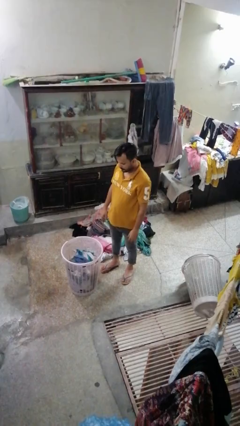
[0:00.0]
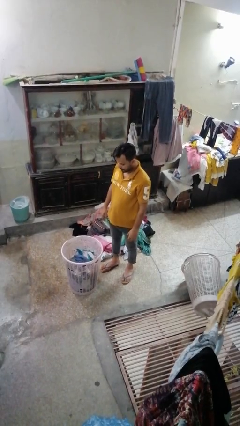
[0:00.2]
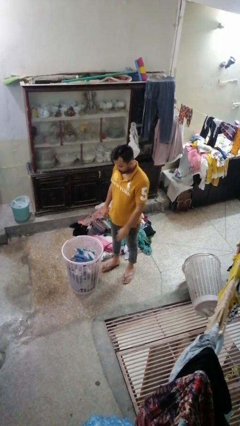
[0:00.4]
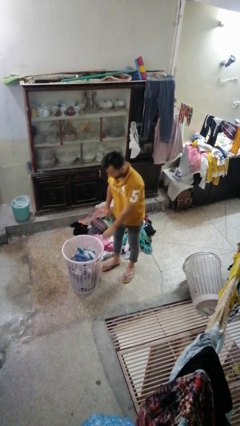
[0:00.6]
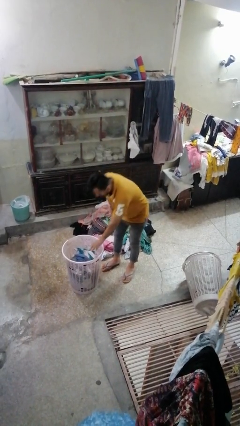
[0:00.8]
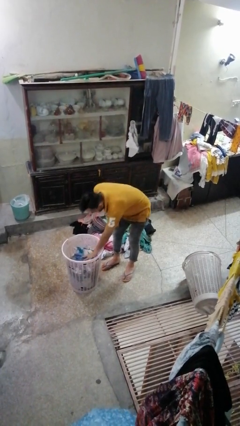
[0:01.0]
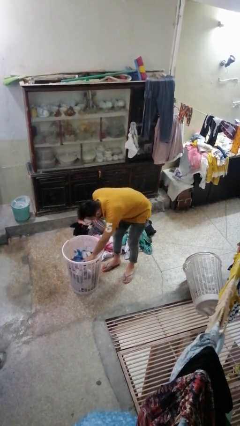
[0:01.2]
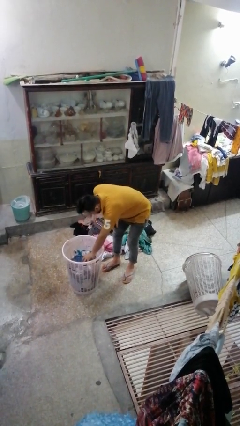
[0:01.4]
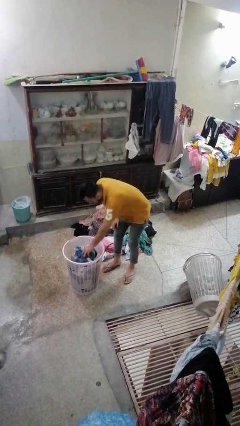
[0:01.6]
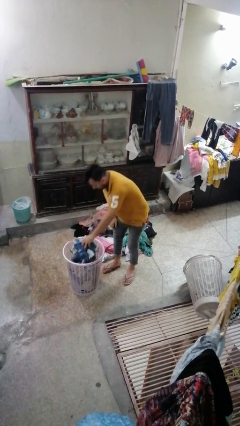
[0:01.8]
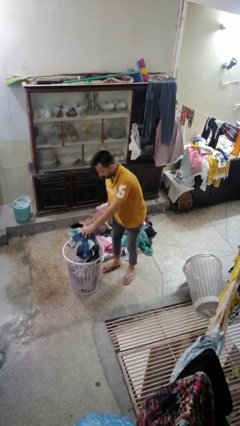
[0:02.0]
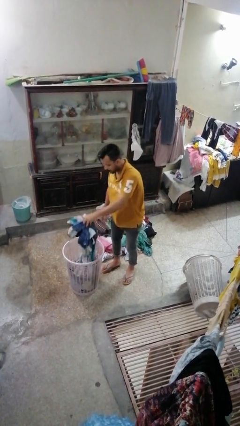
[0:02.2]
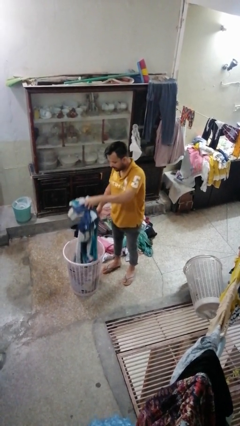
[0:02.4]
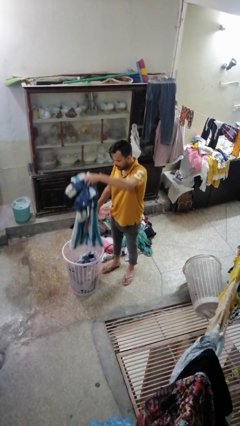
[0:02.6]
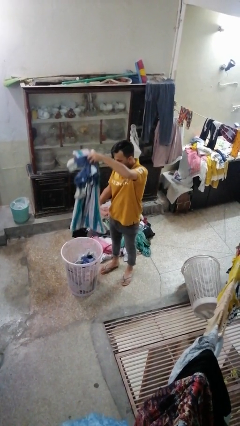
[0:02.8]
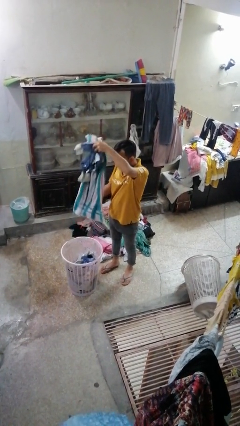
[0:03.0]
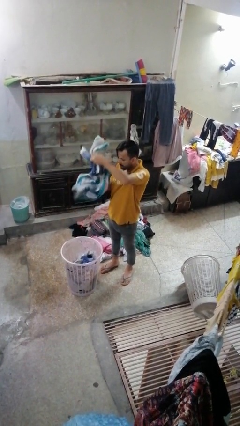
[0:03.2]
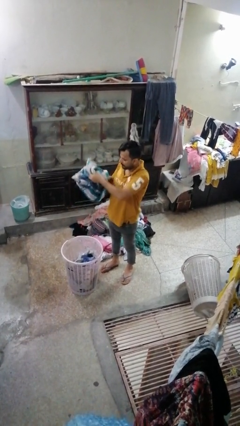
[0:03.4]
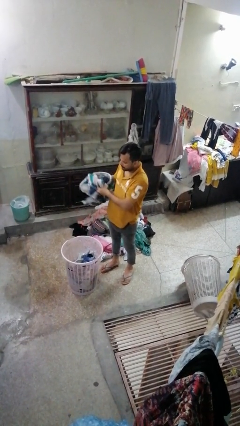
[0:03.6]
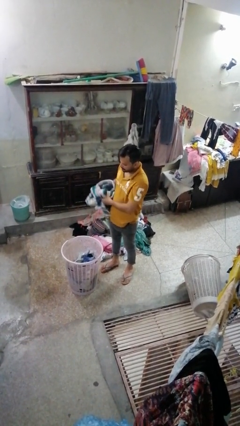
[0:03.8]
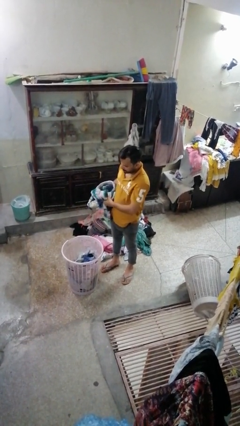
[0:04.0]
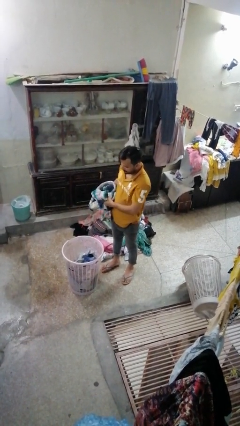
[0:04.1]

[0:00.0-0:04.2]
person takes object from basket

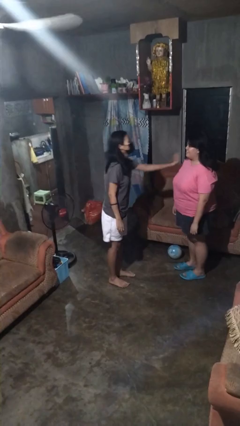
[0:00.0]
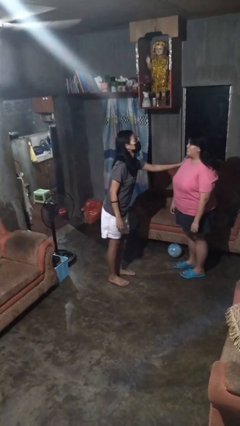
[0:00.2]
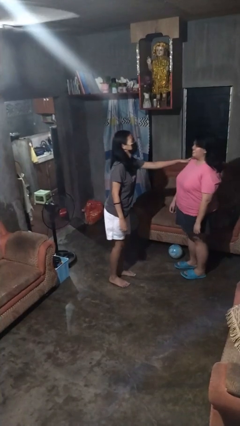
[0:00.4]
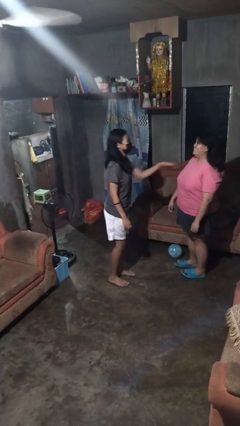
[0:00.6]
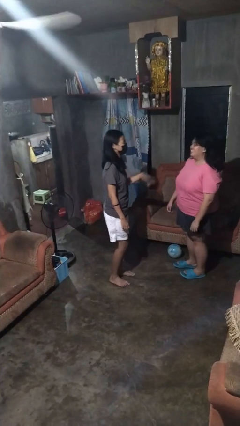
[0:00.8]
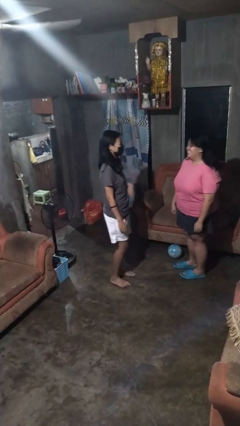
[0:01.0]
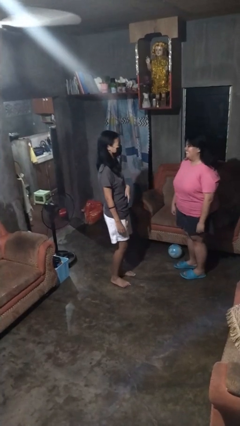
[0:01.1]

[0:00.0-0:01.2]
person shoves person

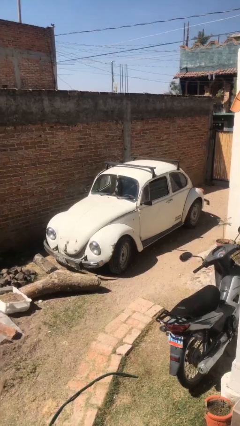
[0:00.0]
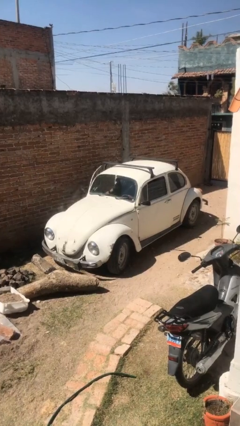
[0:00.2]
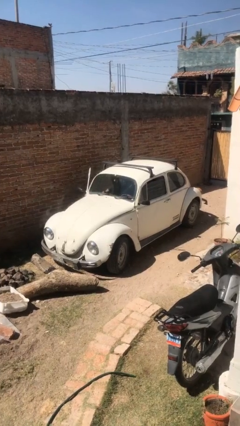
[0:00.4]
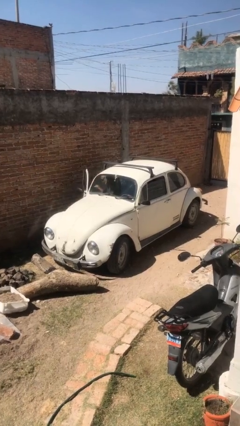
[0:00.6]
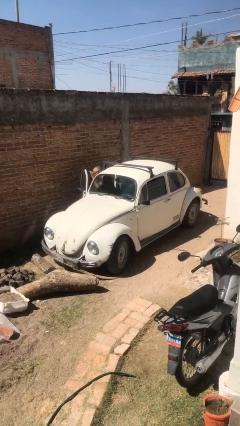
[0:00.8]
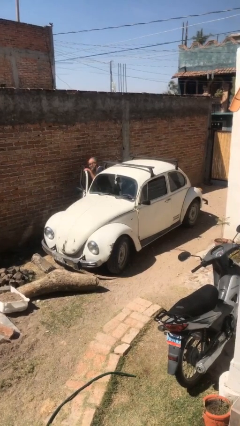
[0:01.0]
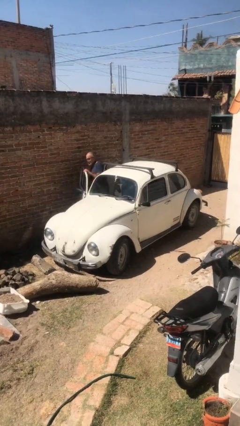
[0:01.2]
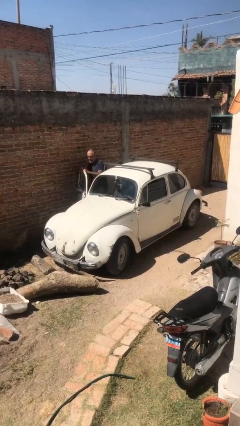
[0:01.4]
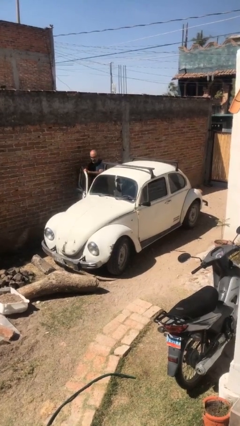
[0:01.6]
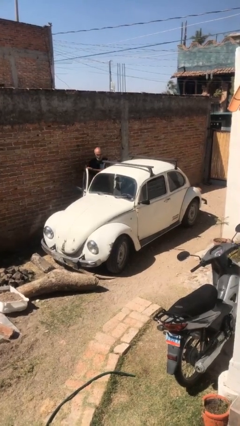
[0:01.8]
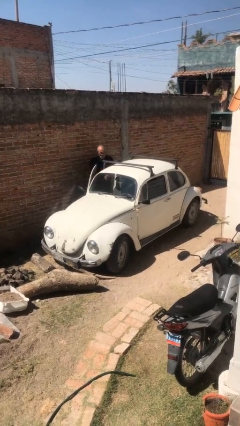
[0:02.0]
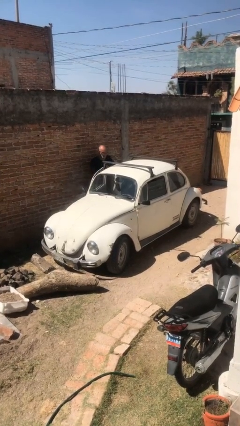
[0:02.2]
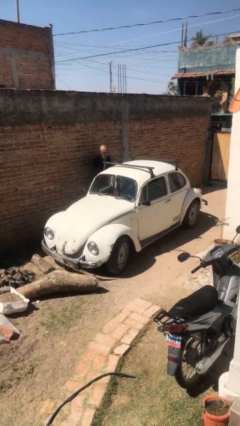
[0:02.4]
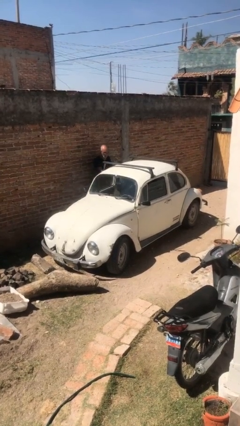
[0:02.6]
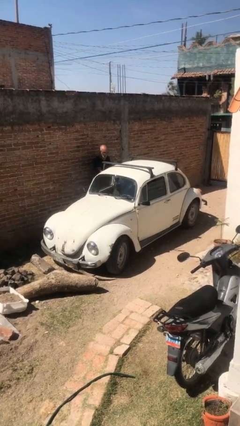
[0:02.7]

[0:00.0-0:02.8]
car drops off person

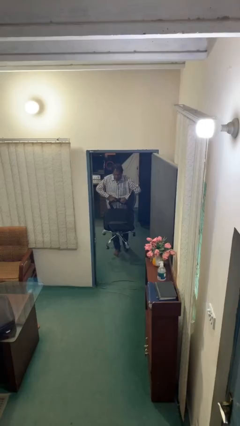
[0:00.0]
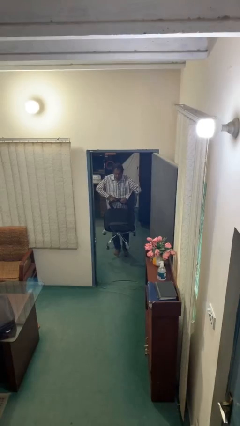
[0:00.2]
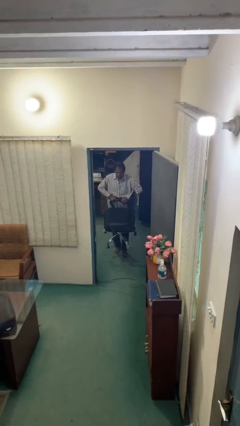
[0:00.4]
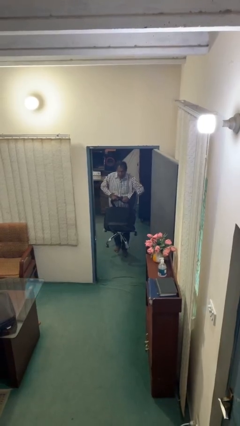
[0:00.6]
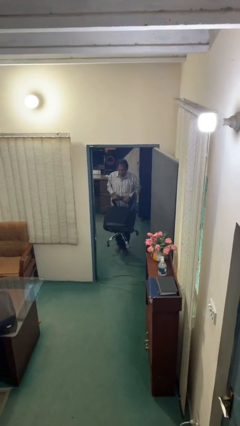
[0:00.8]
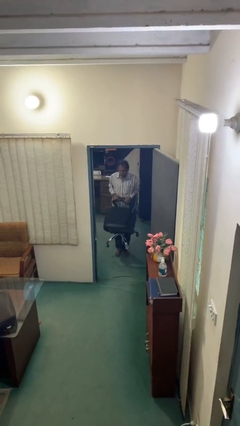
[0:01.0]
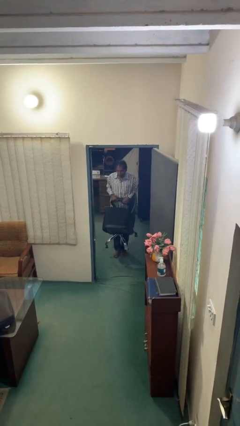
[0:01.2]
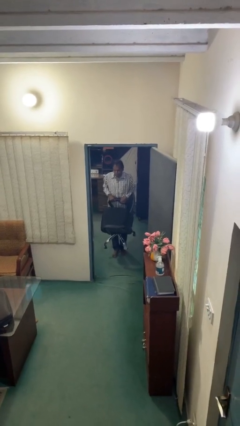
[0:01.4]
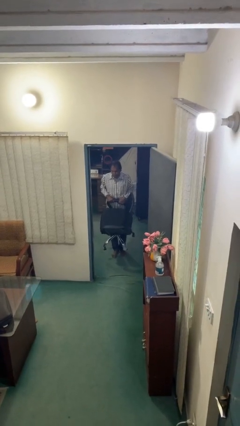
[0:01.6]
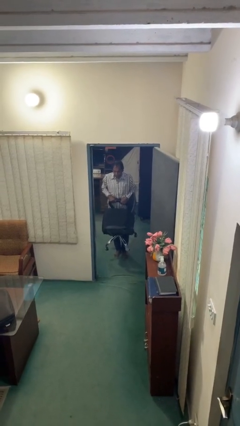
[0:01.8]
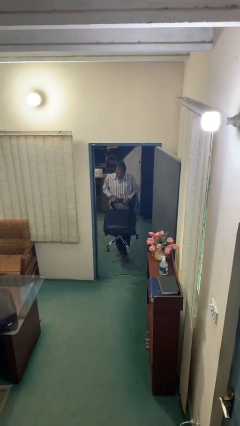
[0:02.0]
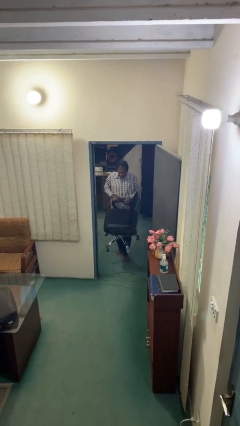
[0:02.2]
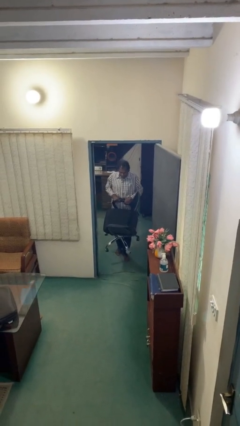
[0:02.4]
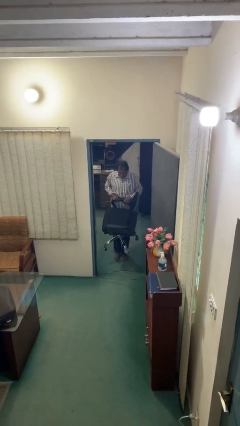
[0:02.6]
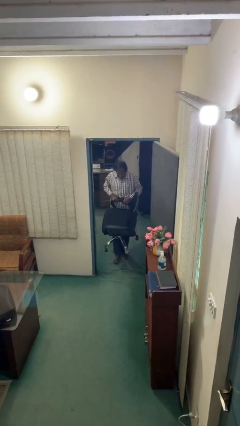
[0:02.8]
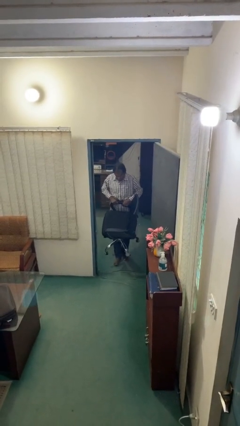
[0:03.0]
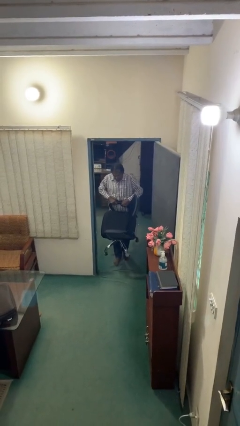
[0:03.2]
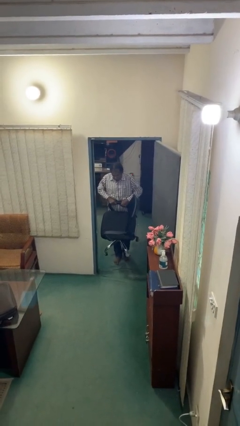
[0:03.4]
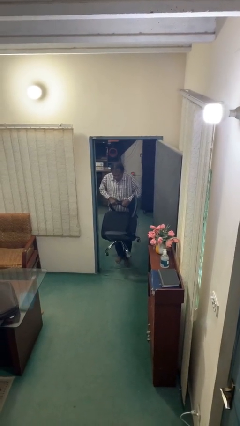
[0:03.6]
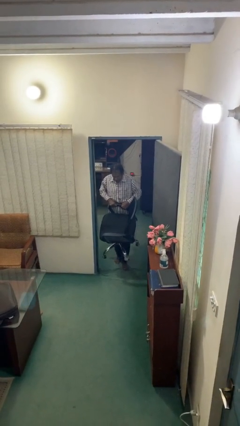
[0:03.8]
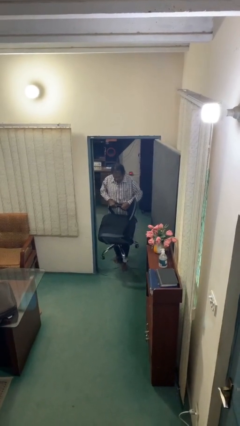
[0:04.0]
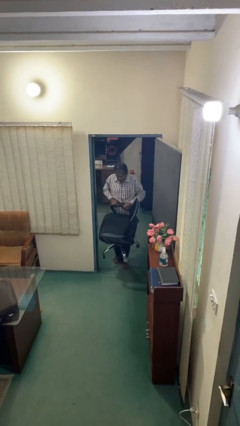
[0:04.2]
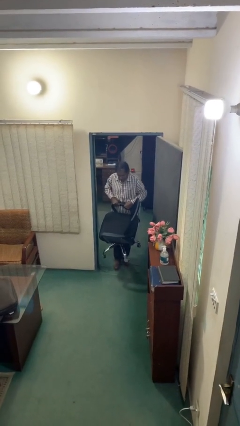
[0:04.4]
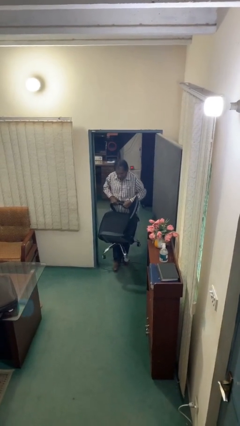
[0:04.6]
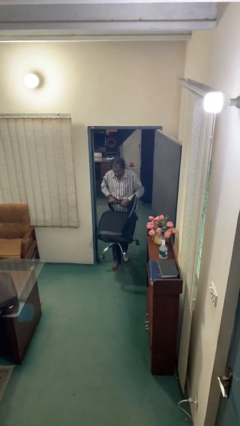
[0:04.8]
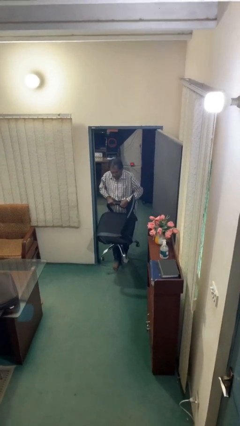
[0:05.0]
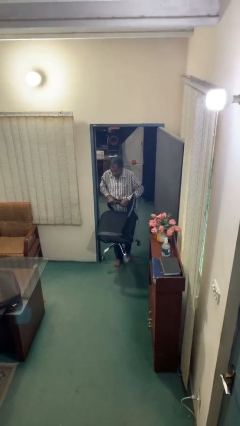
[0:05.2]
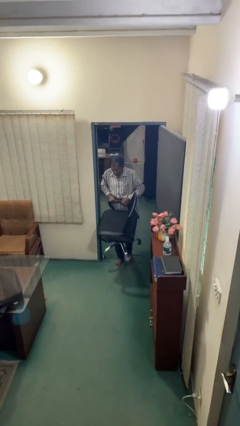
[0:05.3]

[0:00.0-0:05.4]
person carries heavy object

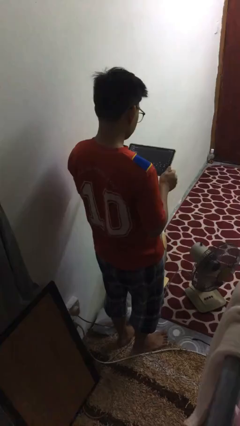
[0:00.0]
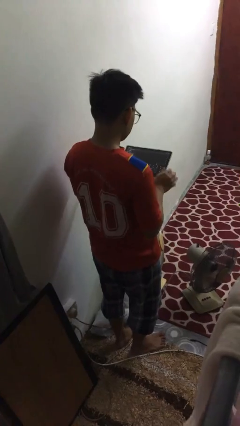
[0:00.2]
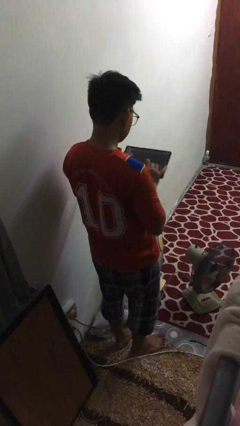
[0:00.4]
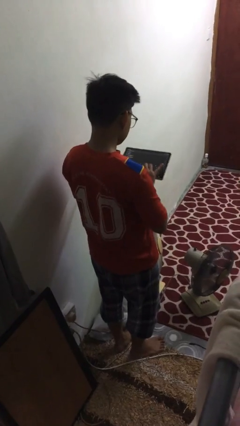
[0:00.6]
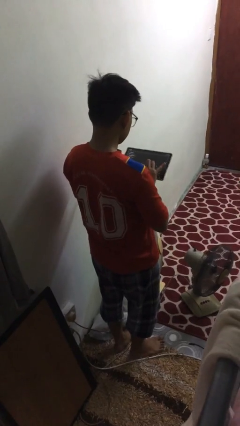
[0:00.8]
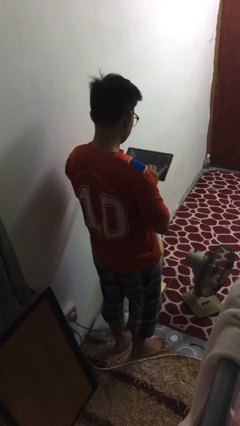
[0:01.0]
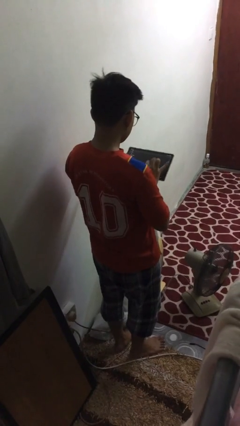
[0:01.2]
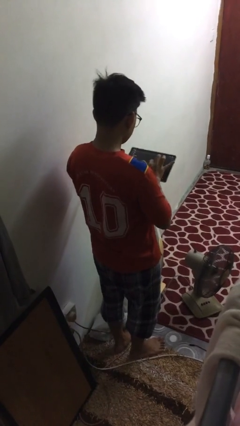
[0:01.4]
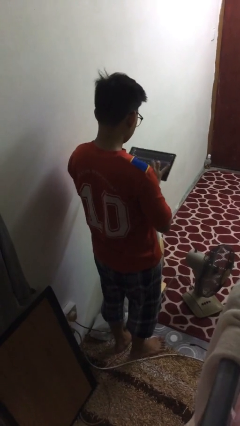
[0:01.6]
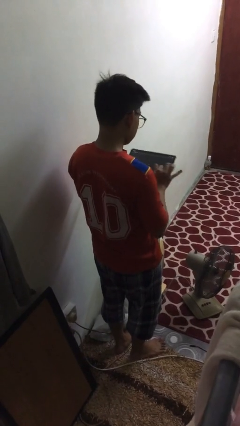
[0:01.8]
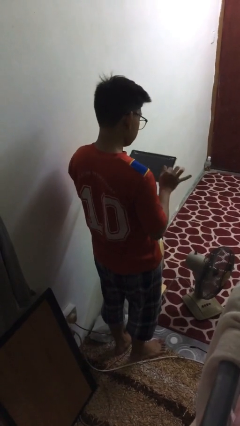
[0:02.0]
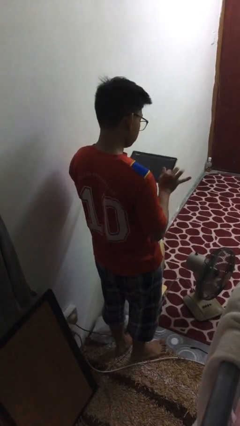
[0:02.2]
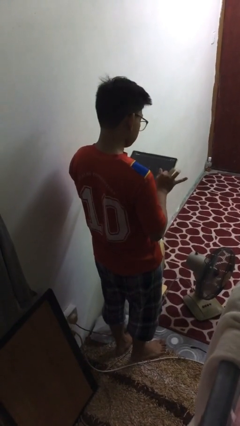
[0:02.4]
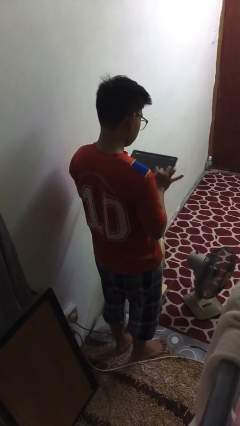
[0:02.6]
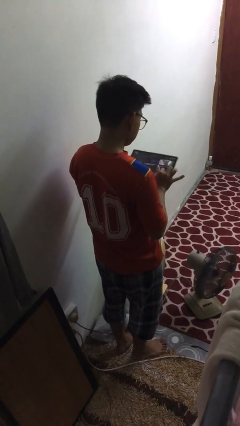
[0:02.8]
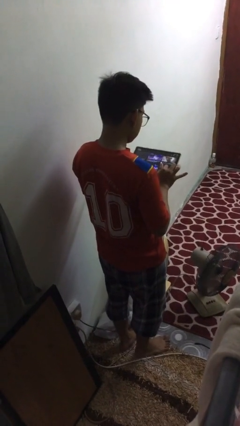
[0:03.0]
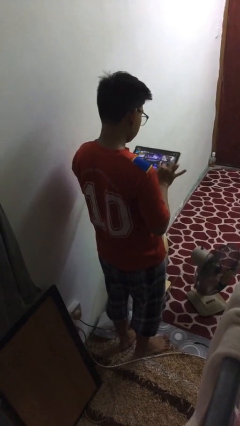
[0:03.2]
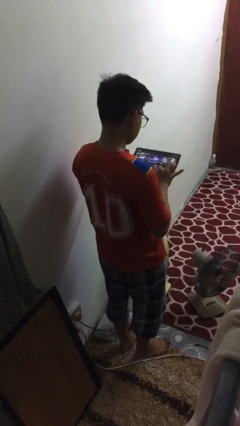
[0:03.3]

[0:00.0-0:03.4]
person interacts with tablet

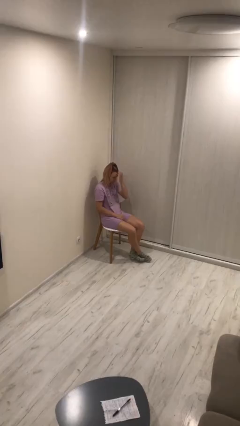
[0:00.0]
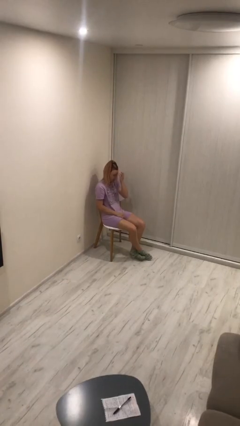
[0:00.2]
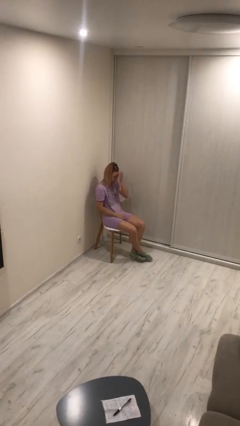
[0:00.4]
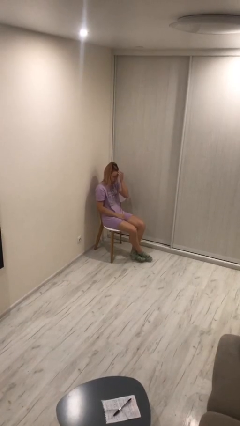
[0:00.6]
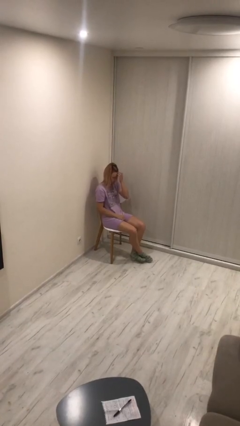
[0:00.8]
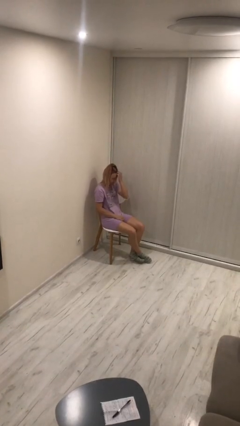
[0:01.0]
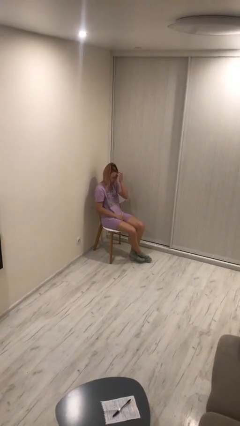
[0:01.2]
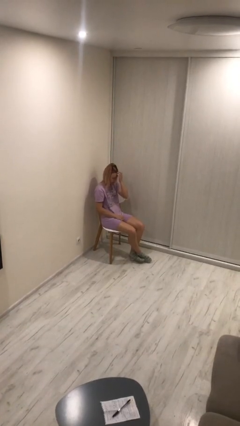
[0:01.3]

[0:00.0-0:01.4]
person scratches face
